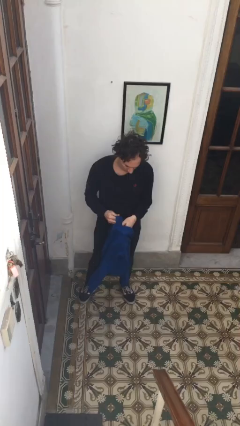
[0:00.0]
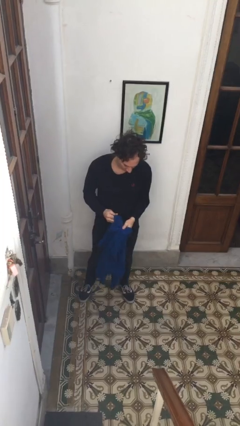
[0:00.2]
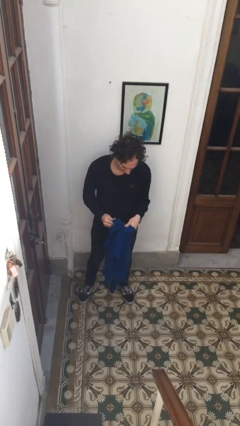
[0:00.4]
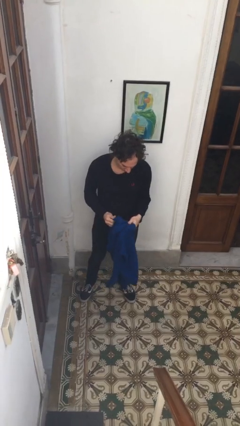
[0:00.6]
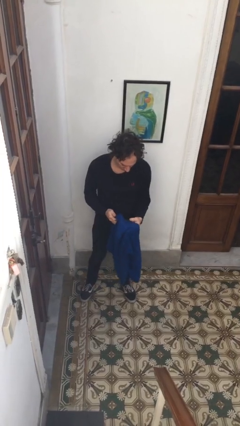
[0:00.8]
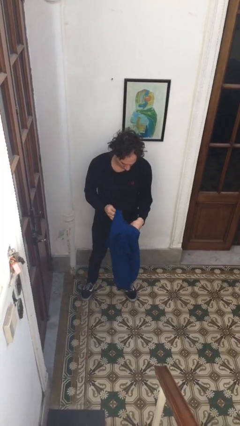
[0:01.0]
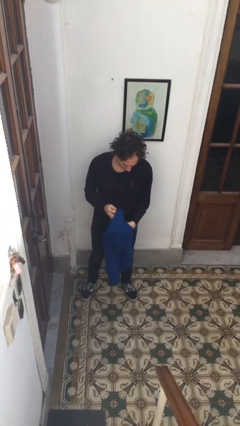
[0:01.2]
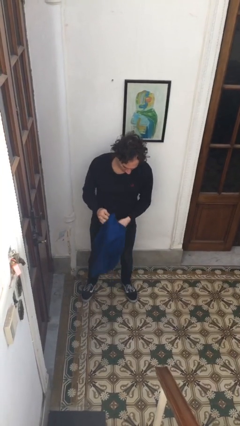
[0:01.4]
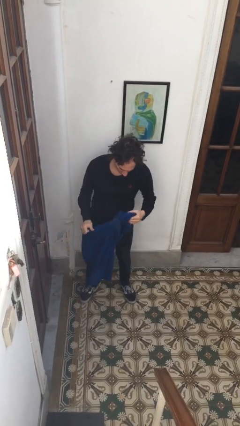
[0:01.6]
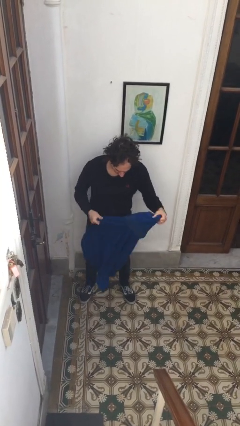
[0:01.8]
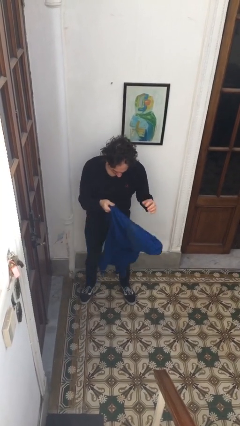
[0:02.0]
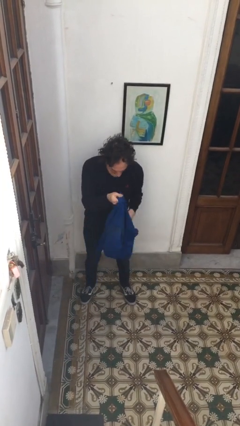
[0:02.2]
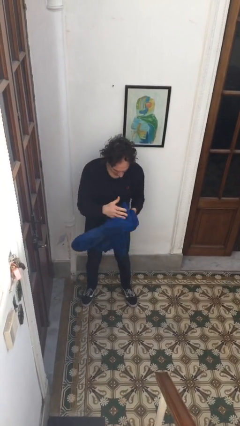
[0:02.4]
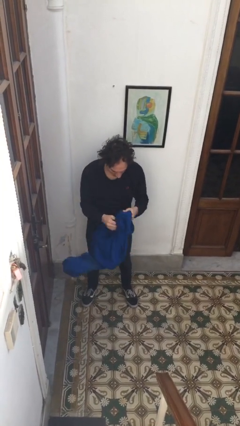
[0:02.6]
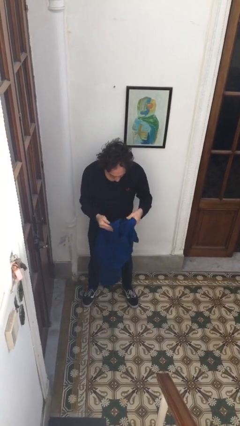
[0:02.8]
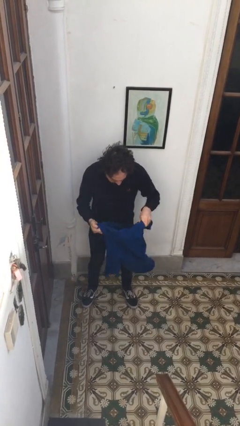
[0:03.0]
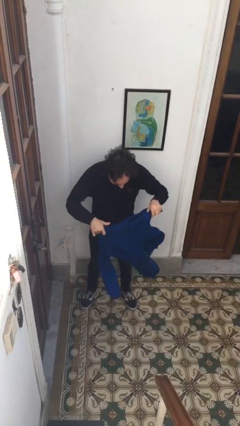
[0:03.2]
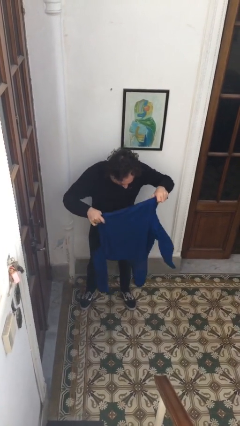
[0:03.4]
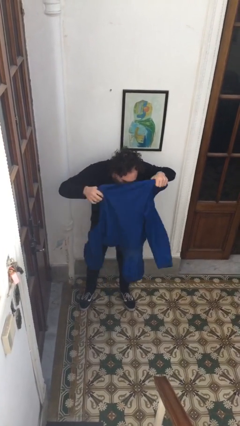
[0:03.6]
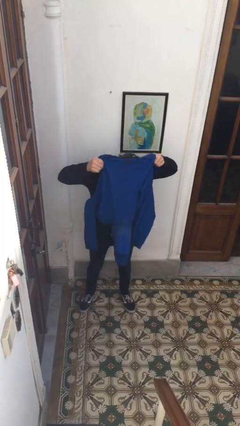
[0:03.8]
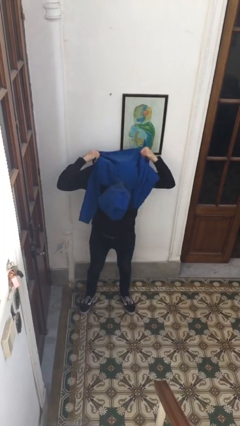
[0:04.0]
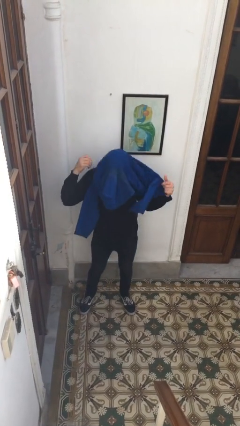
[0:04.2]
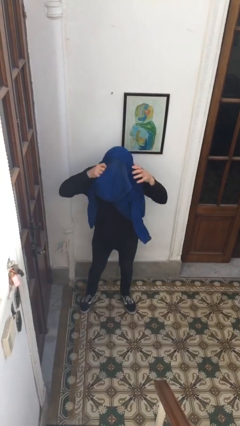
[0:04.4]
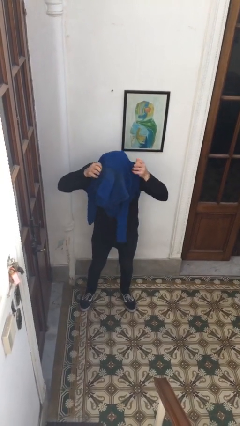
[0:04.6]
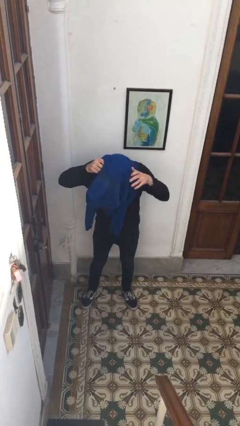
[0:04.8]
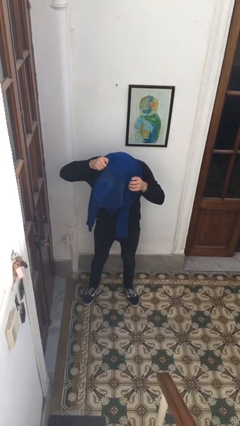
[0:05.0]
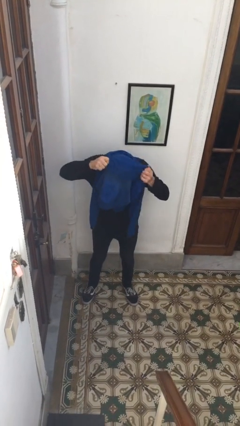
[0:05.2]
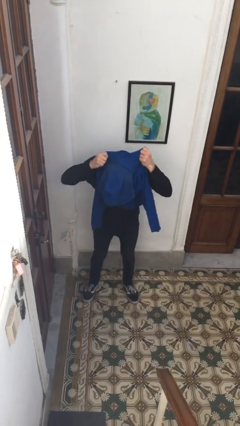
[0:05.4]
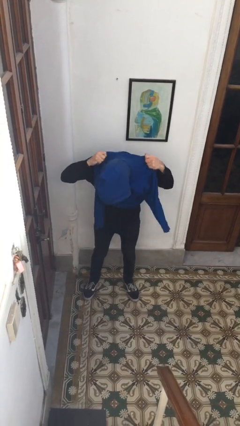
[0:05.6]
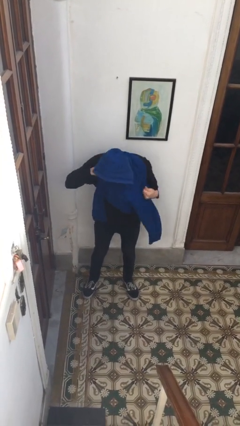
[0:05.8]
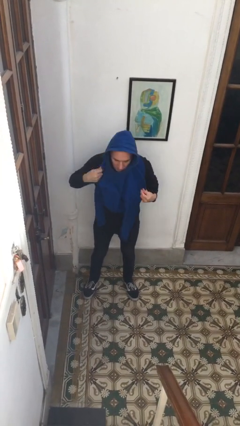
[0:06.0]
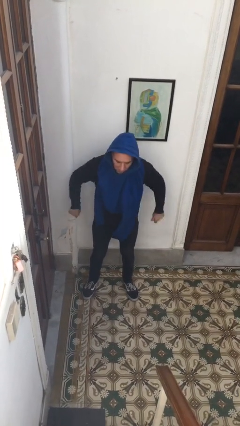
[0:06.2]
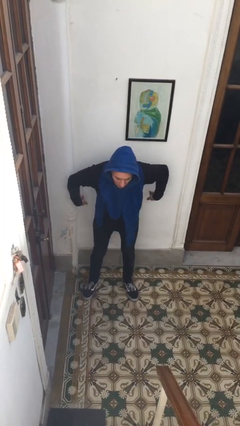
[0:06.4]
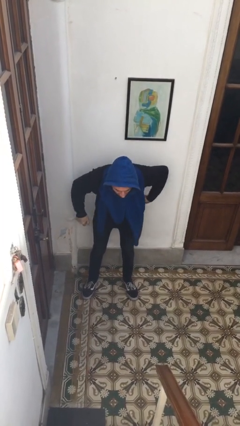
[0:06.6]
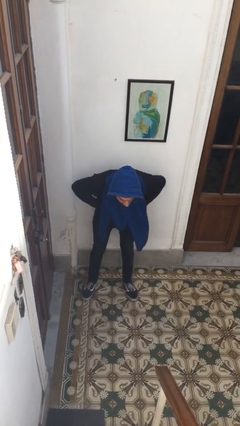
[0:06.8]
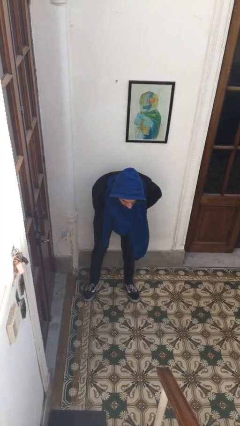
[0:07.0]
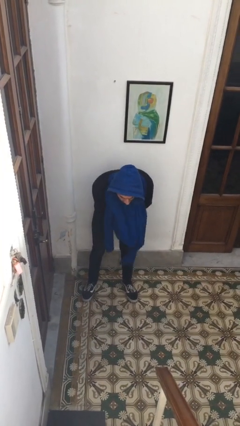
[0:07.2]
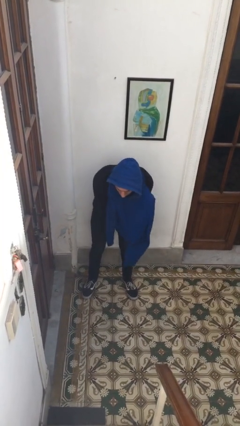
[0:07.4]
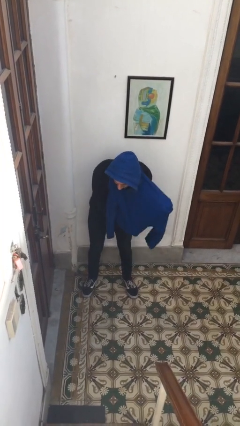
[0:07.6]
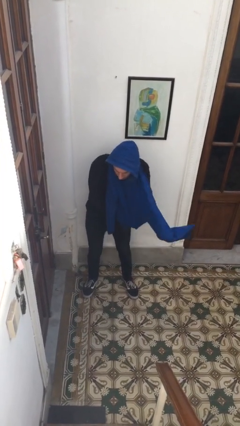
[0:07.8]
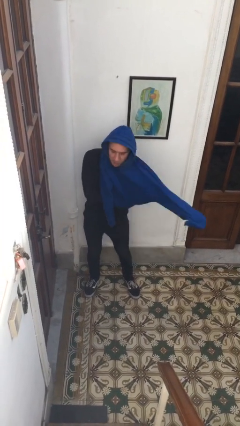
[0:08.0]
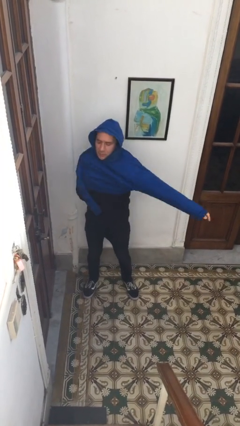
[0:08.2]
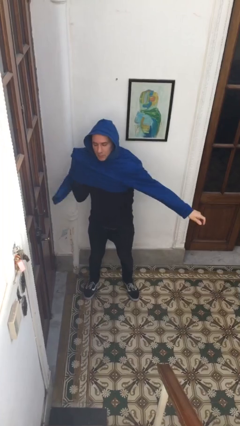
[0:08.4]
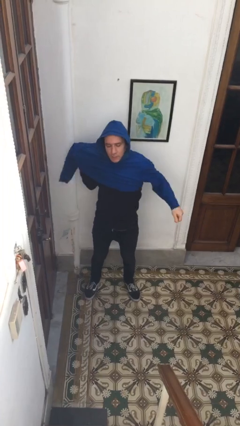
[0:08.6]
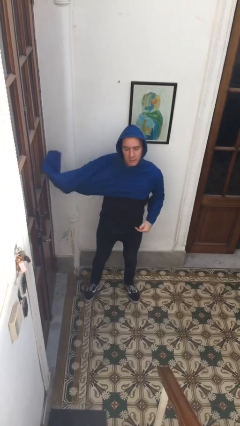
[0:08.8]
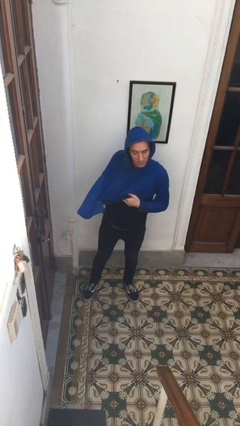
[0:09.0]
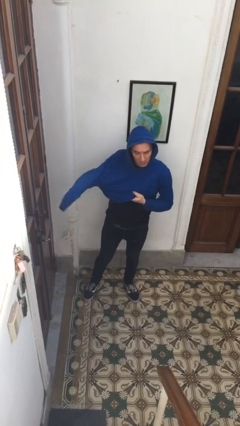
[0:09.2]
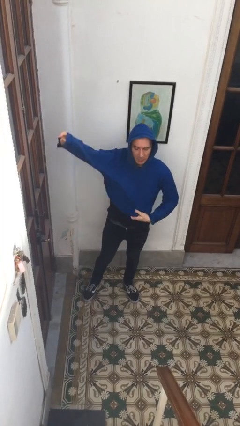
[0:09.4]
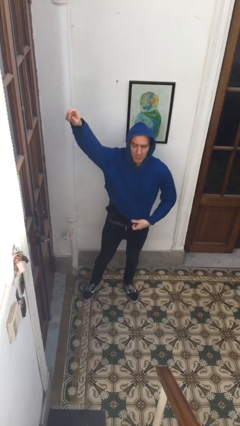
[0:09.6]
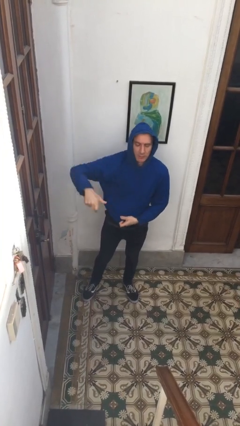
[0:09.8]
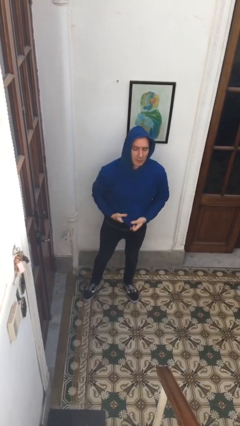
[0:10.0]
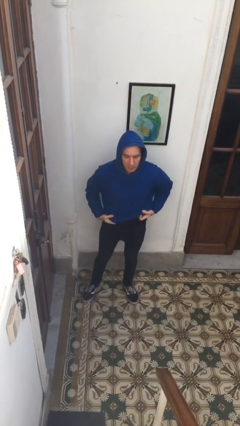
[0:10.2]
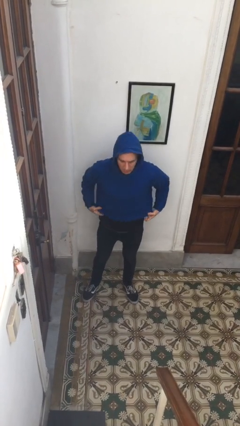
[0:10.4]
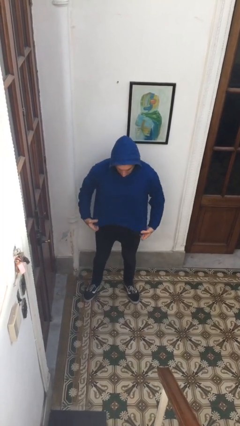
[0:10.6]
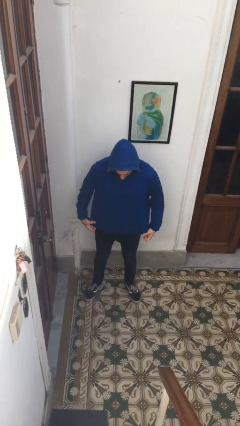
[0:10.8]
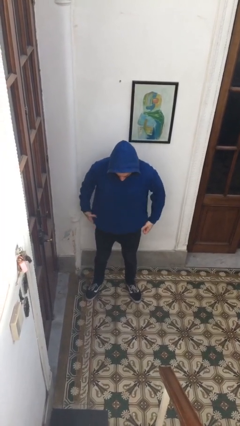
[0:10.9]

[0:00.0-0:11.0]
person puts on hoodie

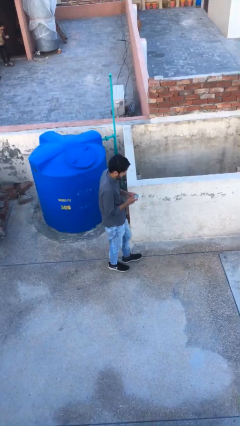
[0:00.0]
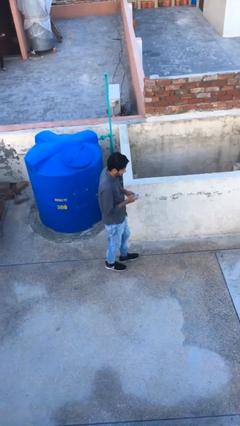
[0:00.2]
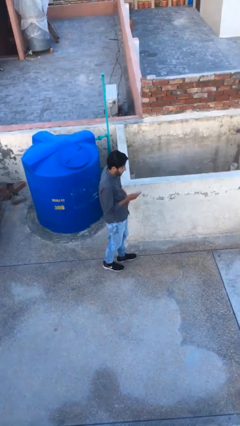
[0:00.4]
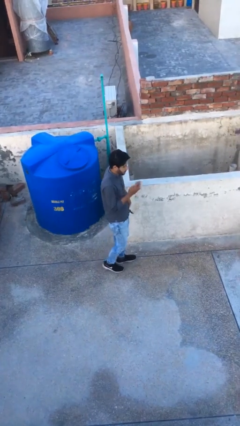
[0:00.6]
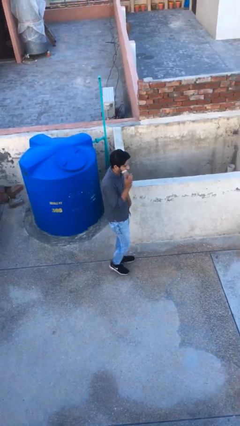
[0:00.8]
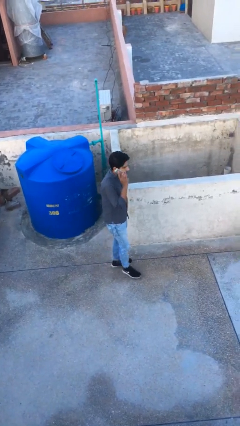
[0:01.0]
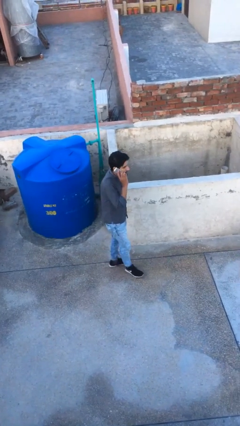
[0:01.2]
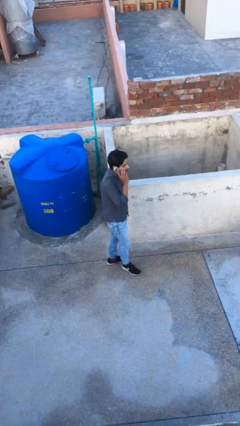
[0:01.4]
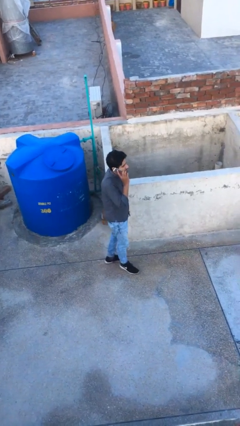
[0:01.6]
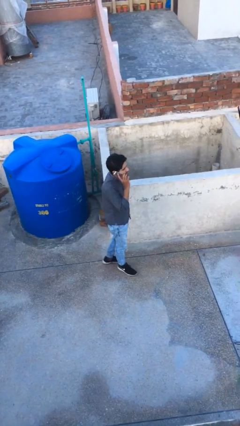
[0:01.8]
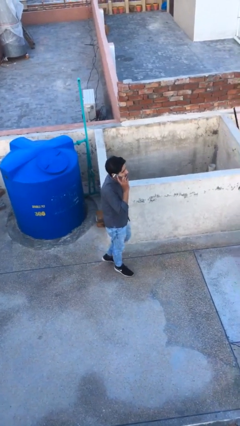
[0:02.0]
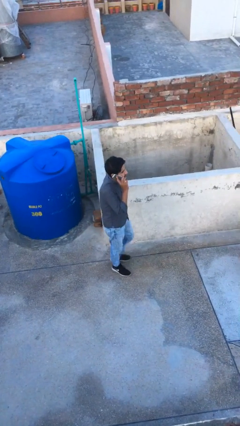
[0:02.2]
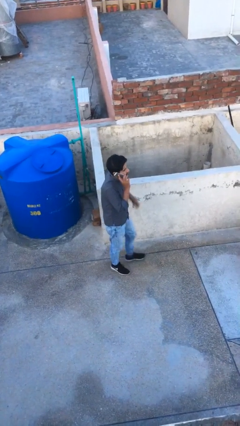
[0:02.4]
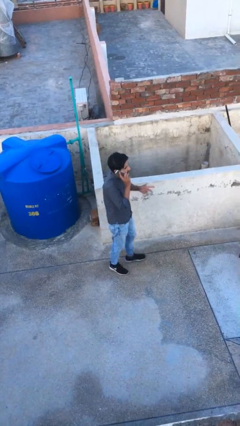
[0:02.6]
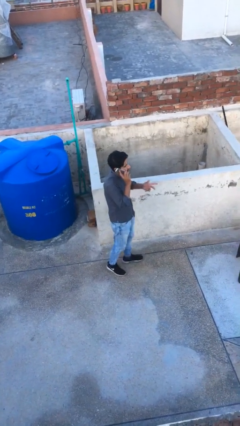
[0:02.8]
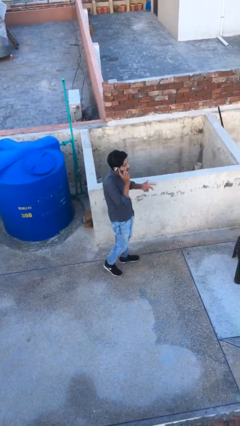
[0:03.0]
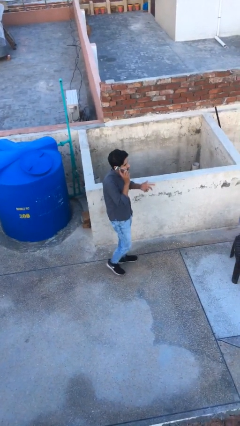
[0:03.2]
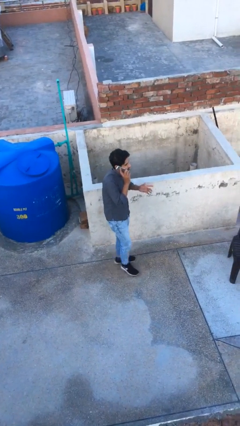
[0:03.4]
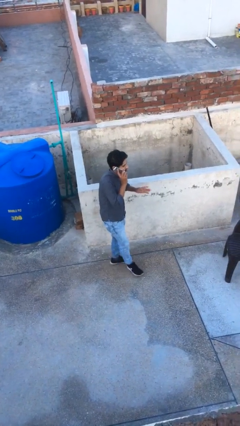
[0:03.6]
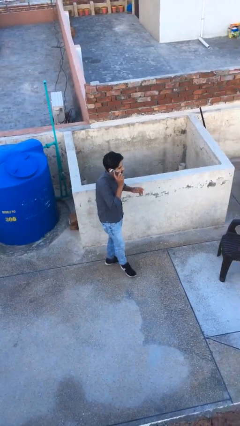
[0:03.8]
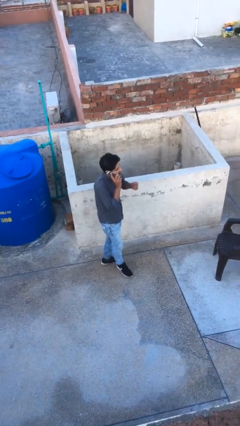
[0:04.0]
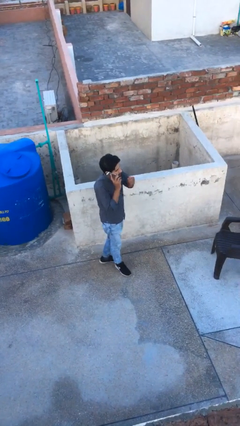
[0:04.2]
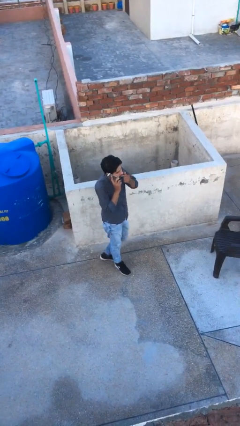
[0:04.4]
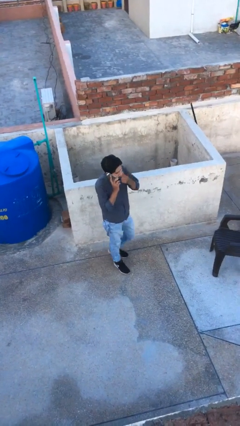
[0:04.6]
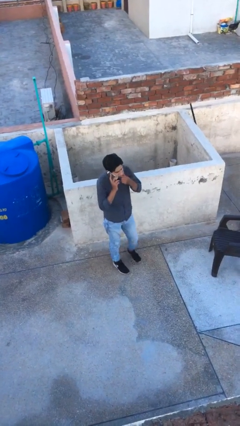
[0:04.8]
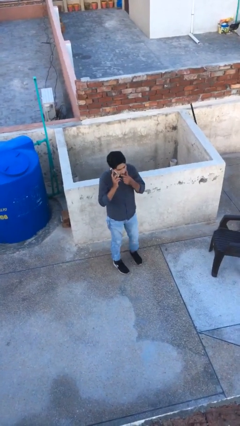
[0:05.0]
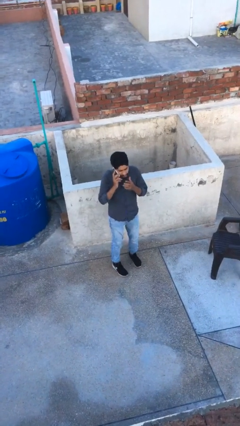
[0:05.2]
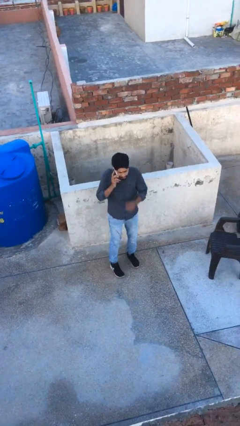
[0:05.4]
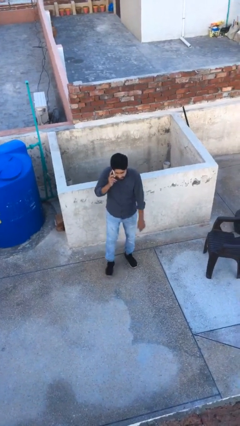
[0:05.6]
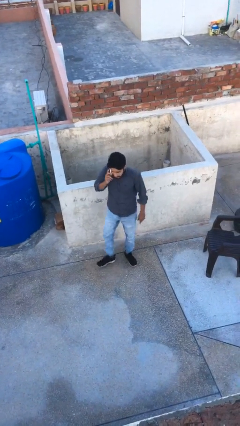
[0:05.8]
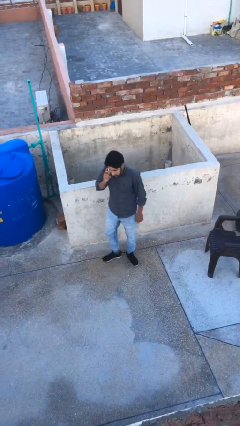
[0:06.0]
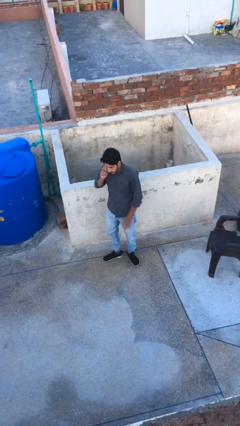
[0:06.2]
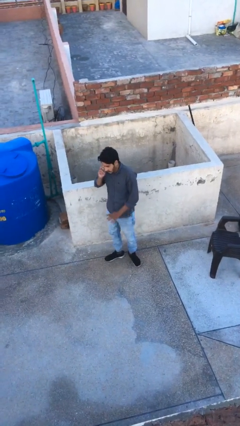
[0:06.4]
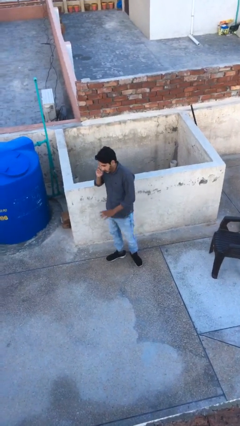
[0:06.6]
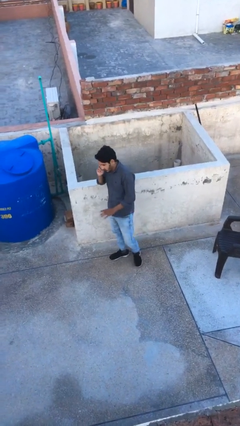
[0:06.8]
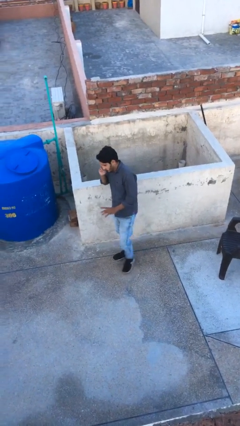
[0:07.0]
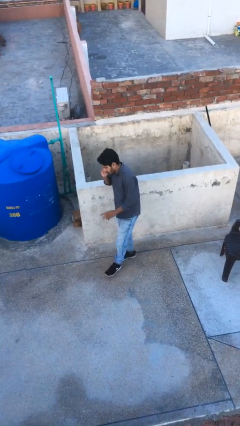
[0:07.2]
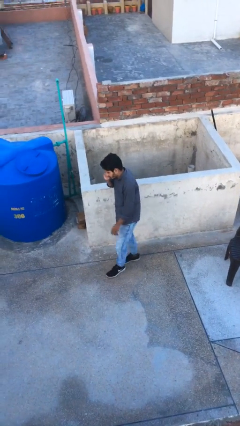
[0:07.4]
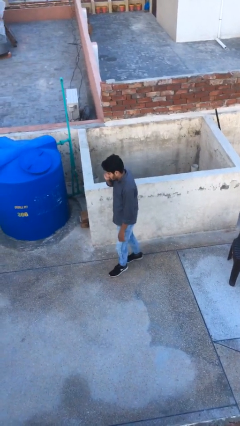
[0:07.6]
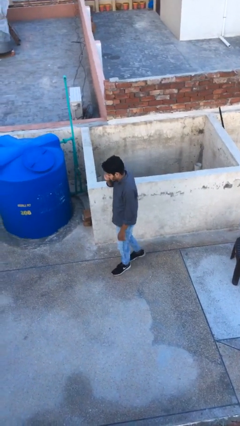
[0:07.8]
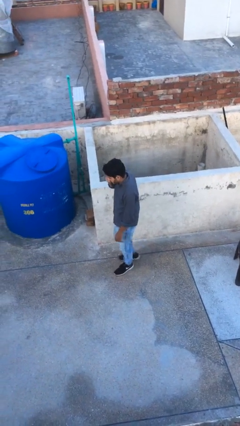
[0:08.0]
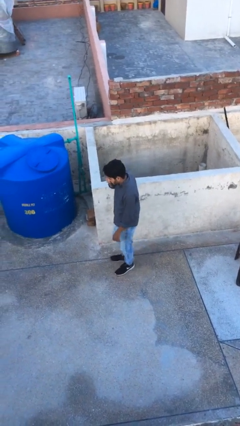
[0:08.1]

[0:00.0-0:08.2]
person talks on phone
